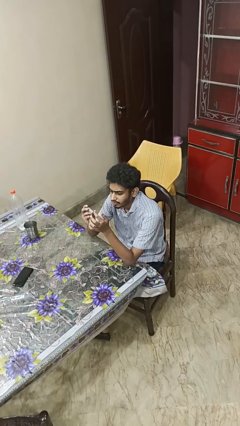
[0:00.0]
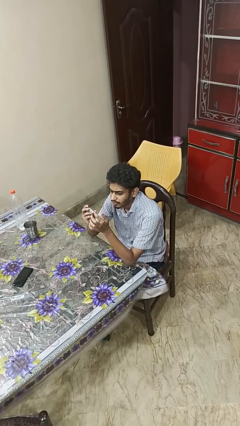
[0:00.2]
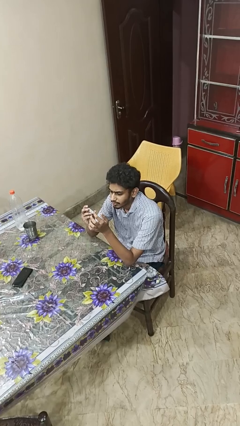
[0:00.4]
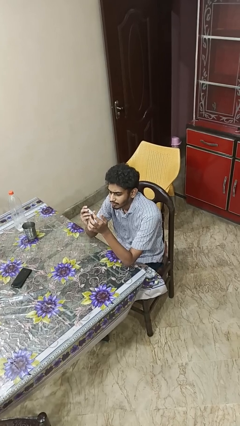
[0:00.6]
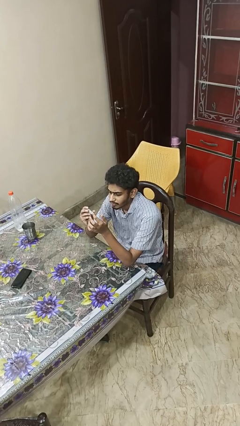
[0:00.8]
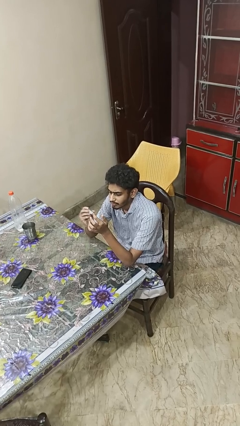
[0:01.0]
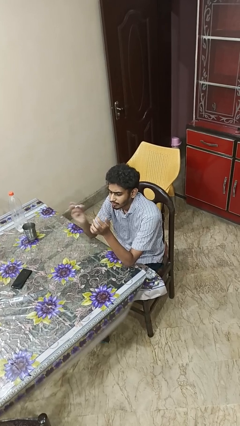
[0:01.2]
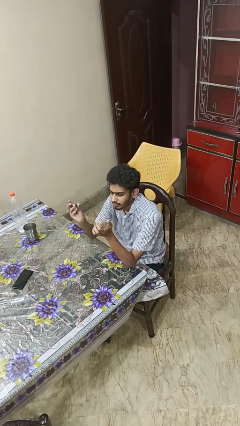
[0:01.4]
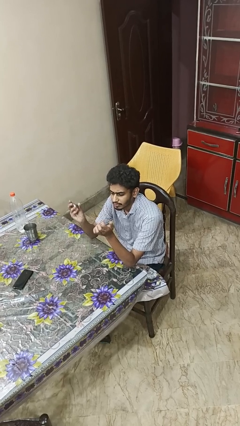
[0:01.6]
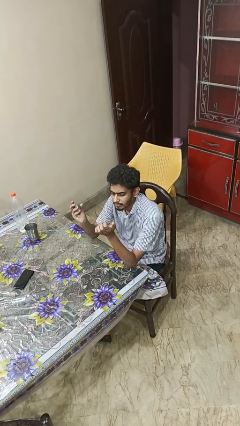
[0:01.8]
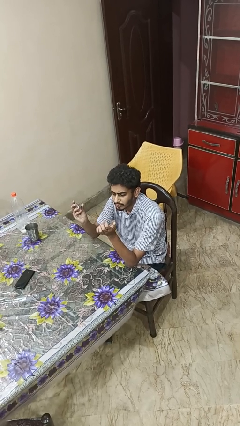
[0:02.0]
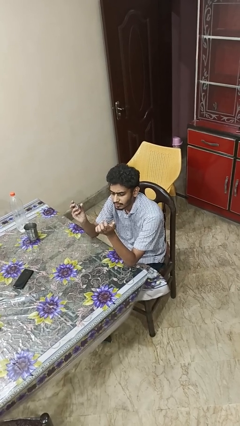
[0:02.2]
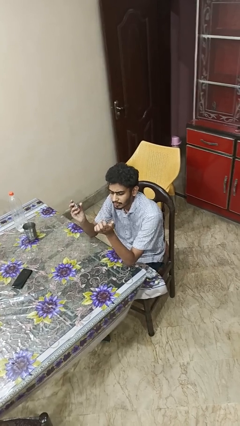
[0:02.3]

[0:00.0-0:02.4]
person clips fingernails

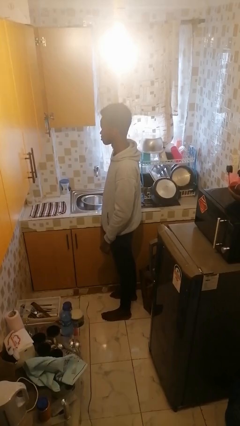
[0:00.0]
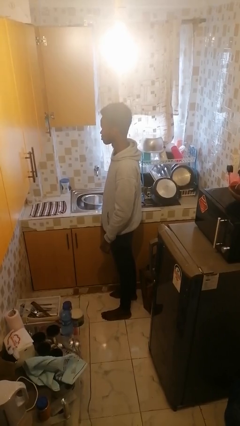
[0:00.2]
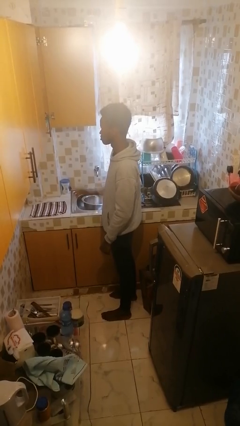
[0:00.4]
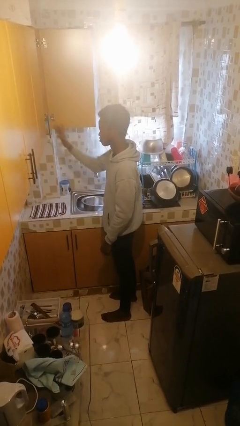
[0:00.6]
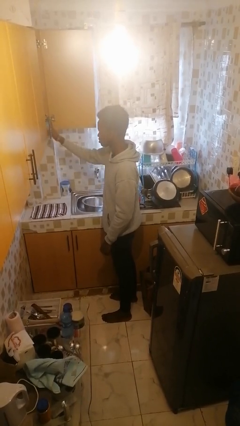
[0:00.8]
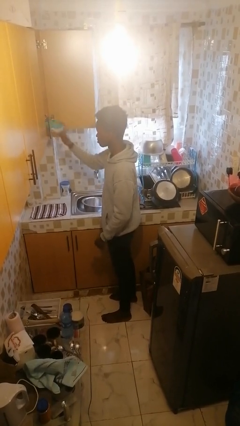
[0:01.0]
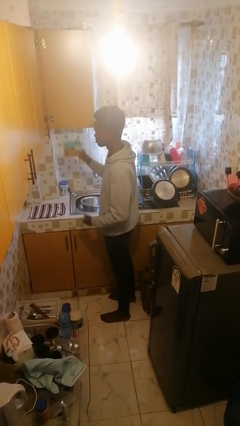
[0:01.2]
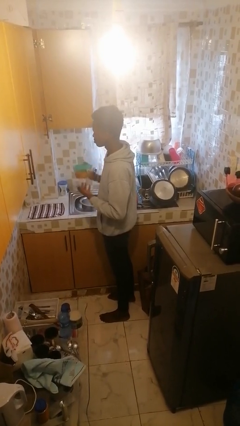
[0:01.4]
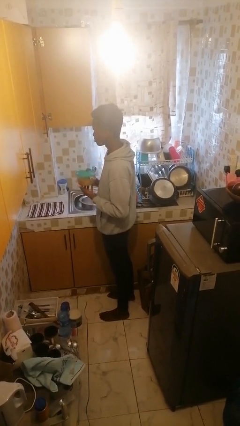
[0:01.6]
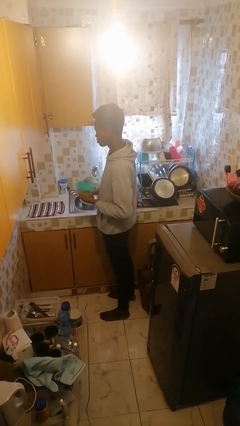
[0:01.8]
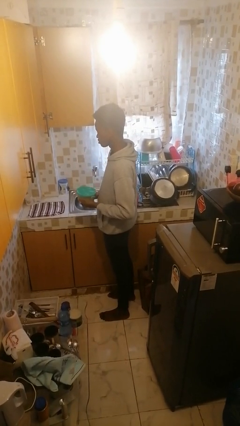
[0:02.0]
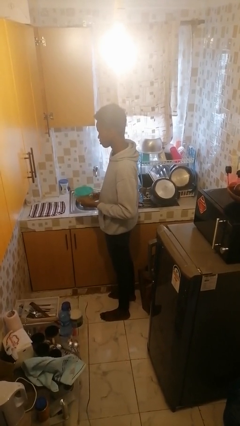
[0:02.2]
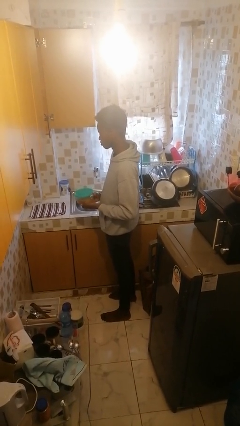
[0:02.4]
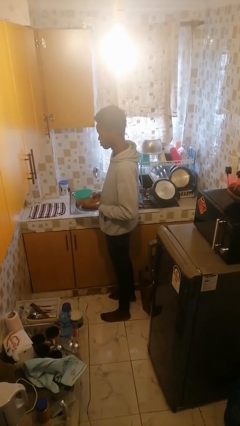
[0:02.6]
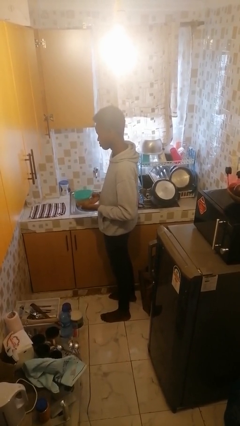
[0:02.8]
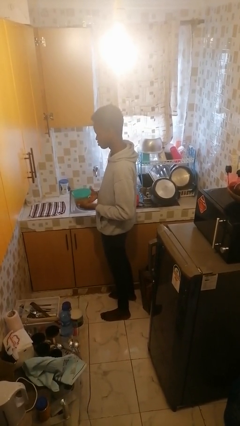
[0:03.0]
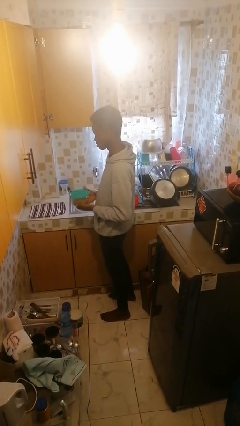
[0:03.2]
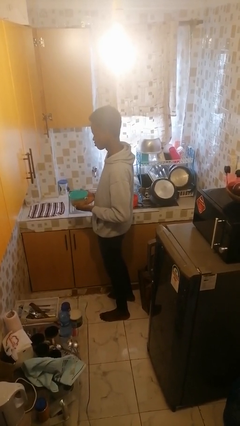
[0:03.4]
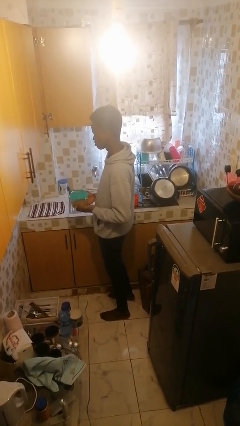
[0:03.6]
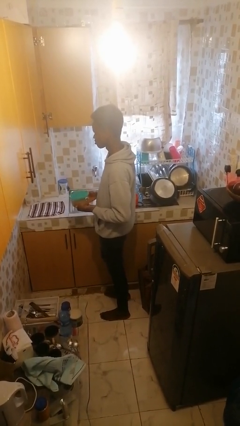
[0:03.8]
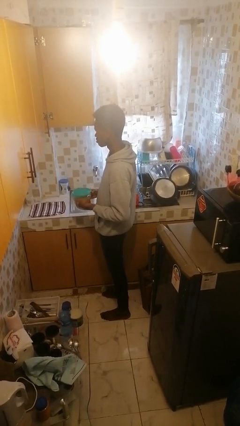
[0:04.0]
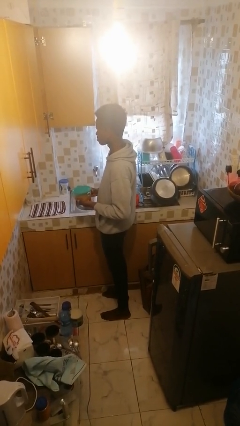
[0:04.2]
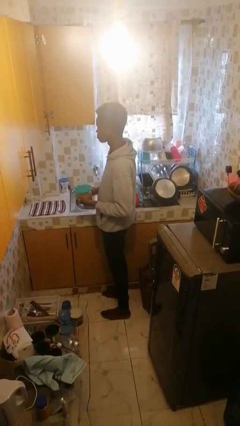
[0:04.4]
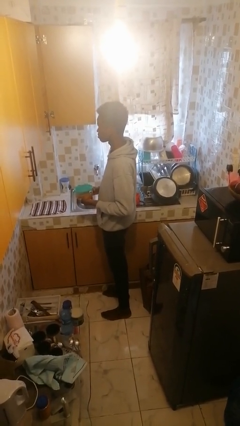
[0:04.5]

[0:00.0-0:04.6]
person picks up object from cabinet

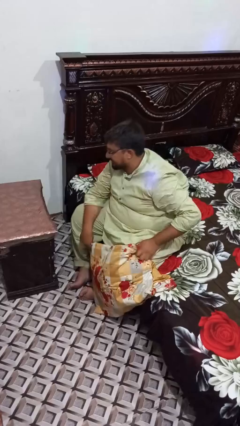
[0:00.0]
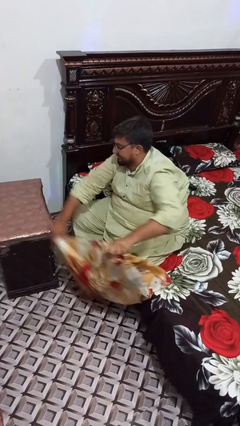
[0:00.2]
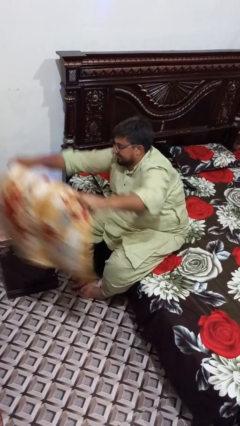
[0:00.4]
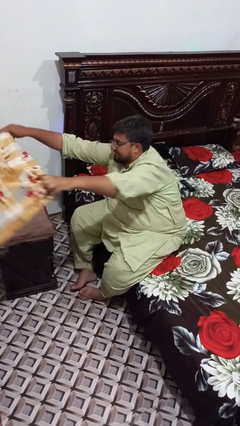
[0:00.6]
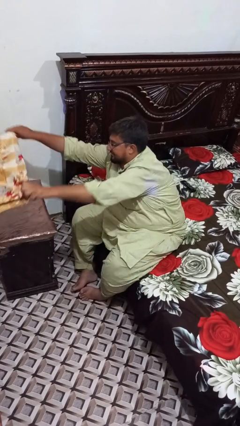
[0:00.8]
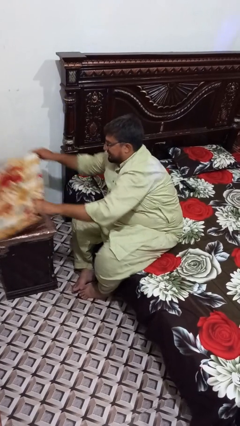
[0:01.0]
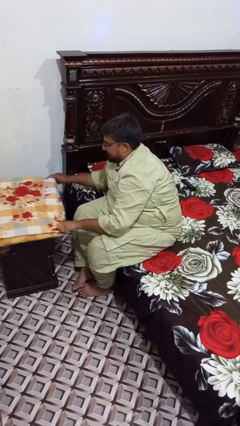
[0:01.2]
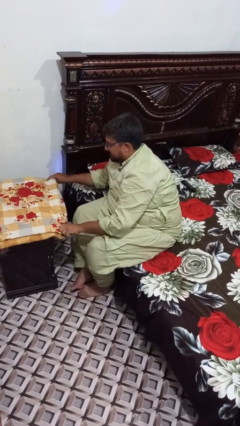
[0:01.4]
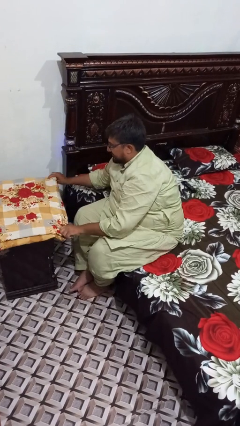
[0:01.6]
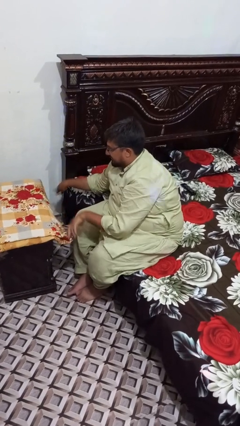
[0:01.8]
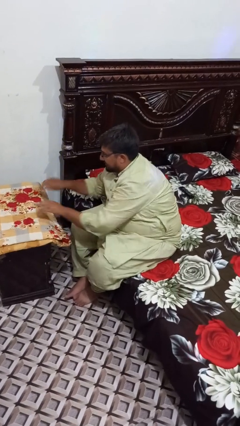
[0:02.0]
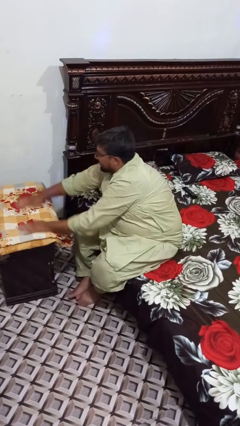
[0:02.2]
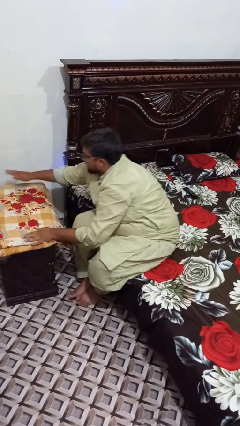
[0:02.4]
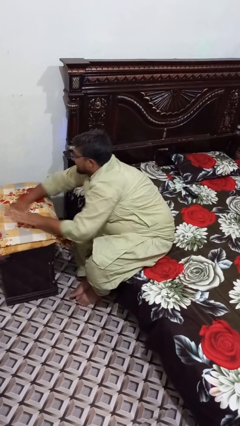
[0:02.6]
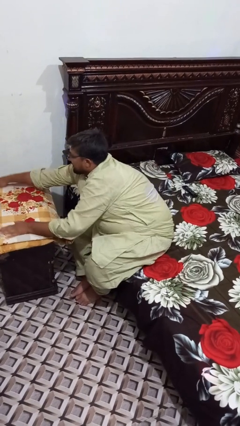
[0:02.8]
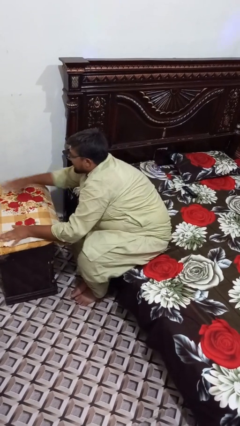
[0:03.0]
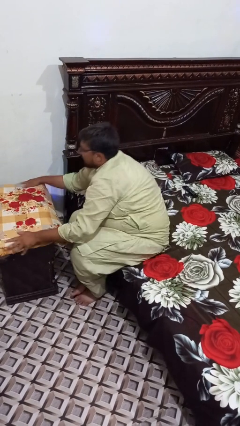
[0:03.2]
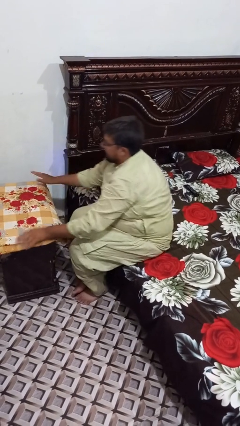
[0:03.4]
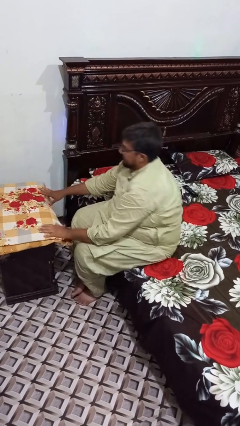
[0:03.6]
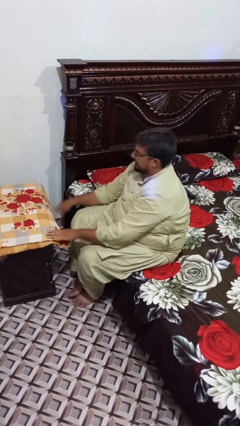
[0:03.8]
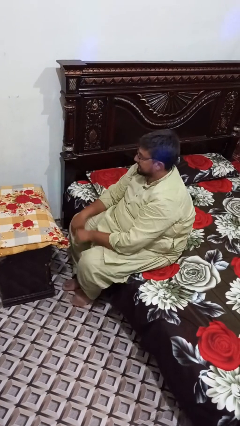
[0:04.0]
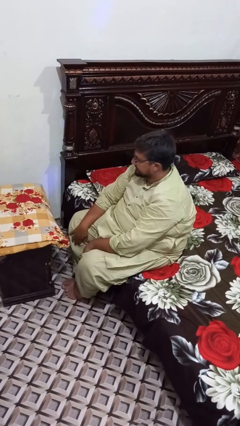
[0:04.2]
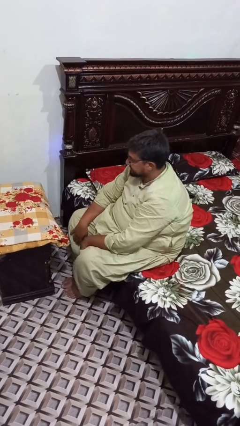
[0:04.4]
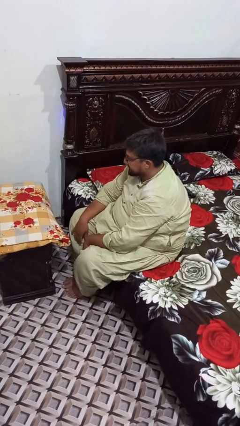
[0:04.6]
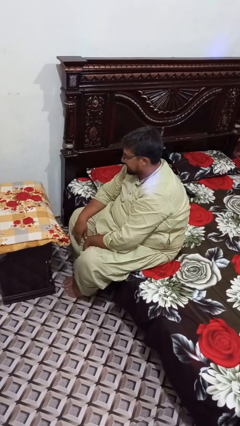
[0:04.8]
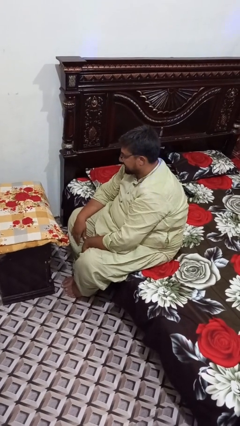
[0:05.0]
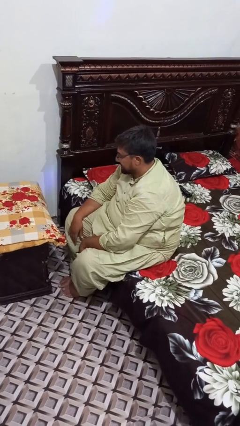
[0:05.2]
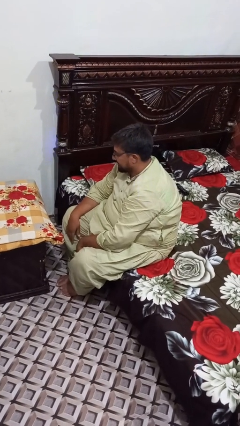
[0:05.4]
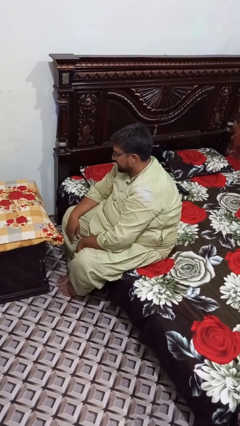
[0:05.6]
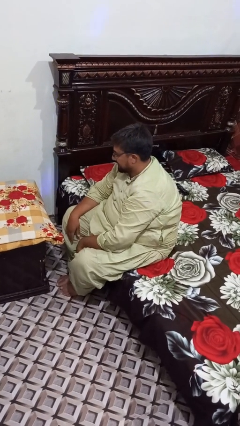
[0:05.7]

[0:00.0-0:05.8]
person spreads tablecloth

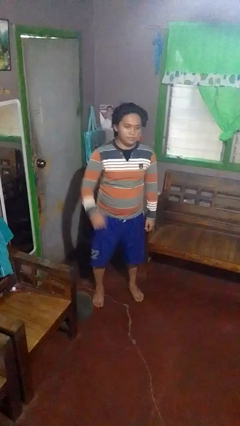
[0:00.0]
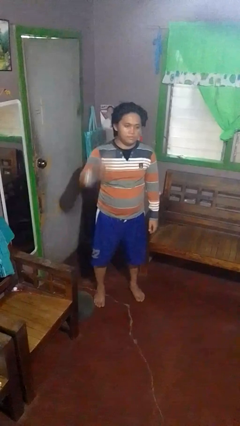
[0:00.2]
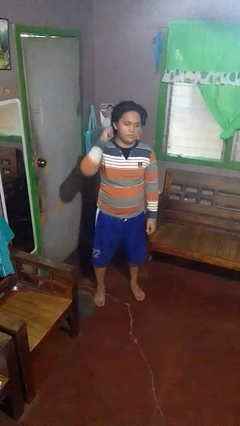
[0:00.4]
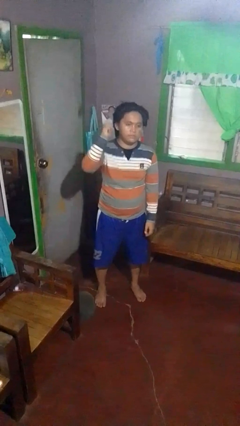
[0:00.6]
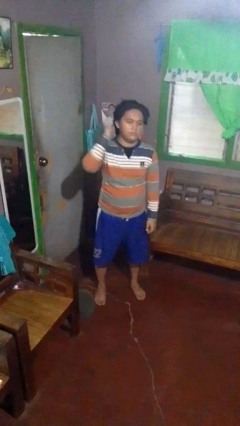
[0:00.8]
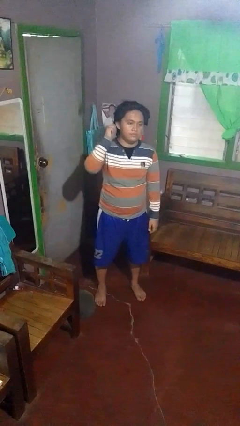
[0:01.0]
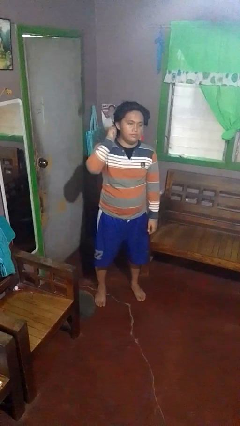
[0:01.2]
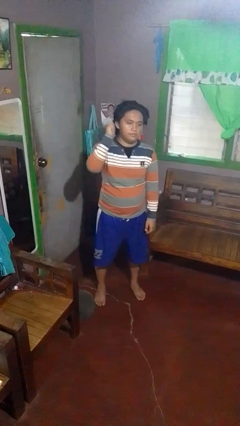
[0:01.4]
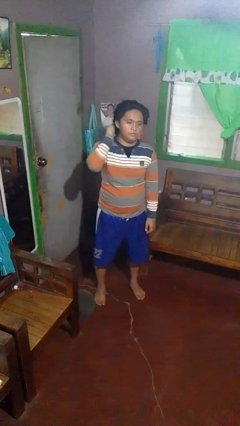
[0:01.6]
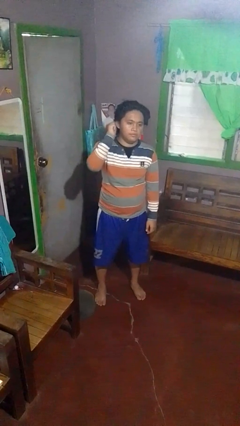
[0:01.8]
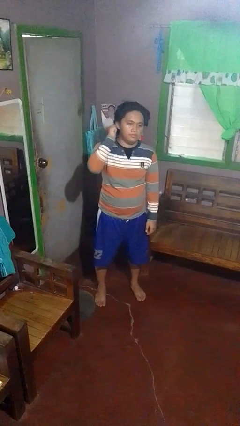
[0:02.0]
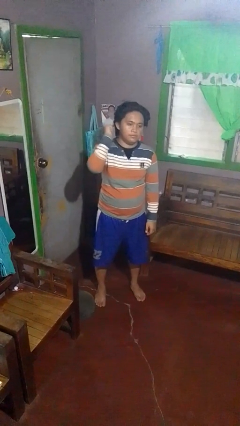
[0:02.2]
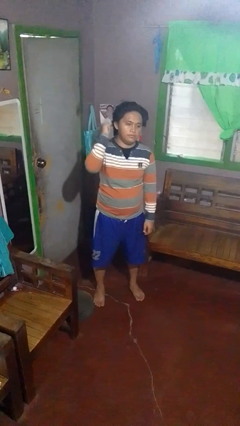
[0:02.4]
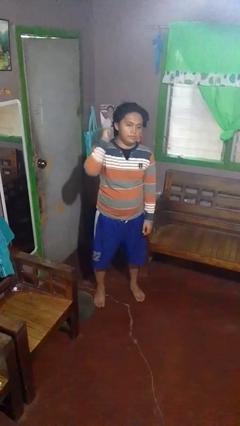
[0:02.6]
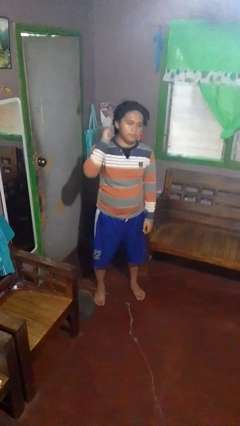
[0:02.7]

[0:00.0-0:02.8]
person gestures behind me

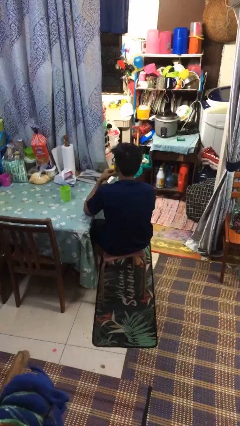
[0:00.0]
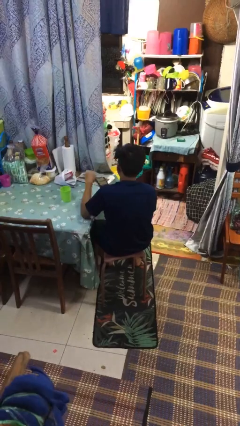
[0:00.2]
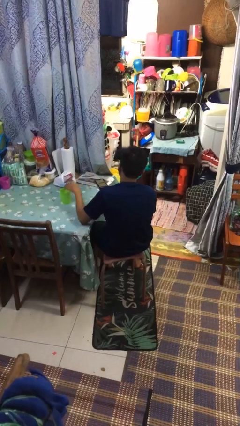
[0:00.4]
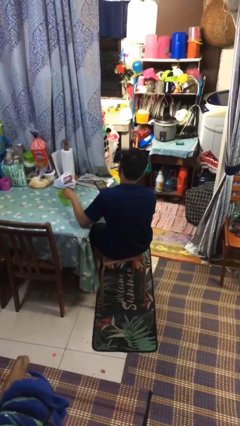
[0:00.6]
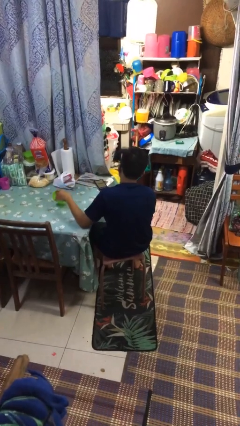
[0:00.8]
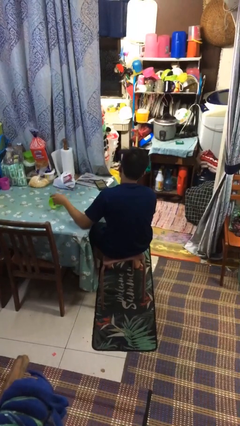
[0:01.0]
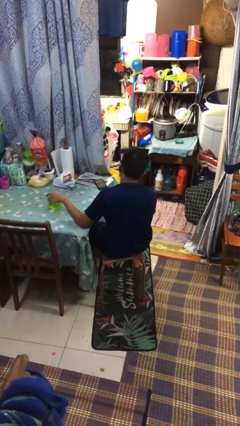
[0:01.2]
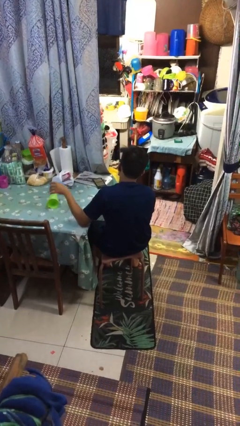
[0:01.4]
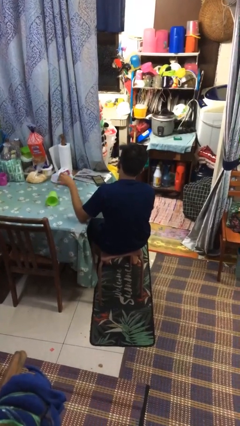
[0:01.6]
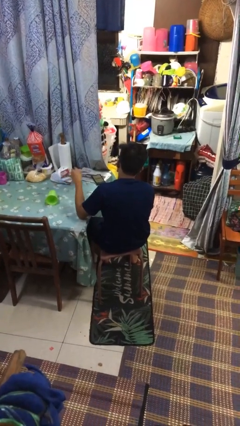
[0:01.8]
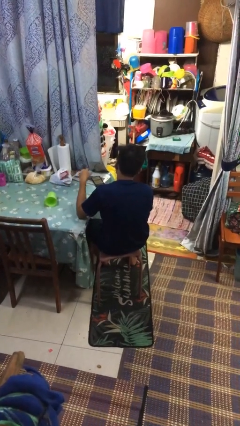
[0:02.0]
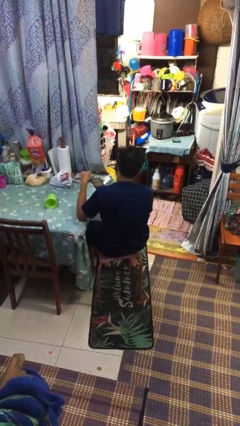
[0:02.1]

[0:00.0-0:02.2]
person knocks over glass
